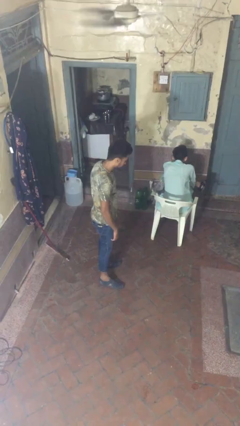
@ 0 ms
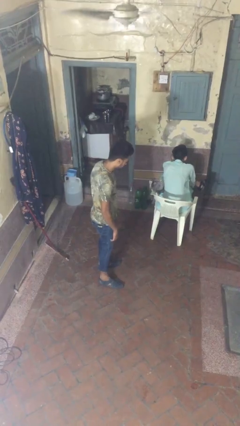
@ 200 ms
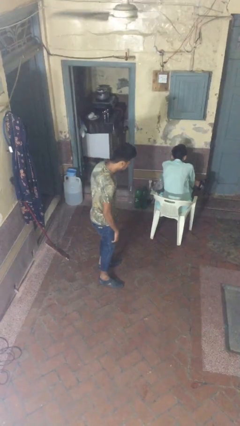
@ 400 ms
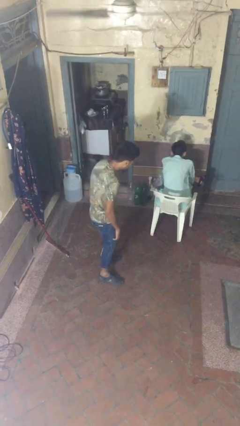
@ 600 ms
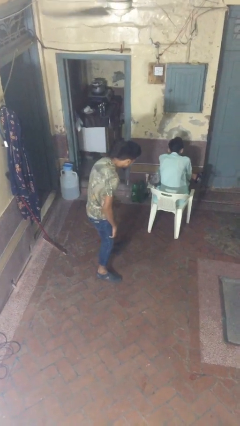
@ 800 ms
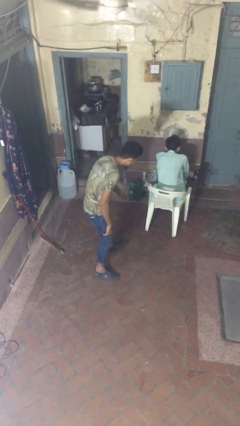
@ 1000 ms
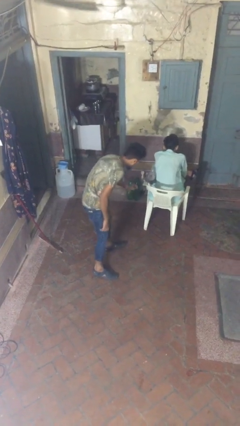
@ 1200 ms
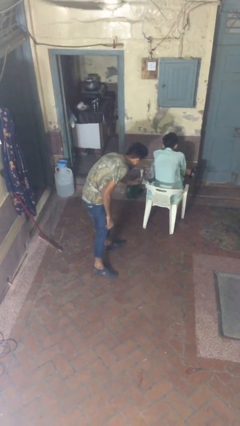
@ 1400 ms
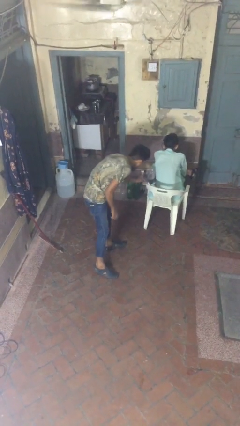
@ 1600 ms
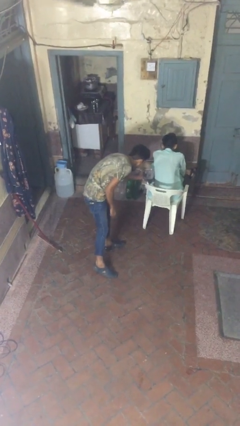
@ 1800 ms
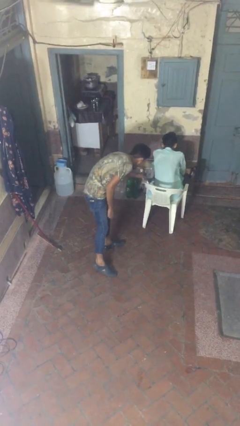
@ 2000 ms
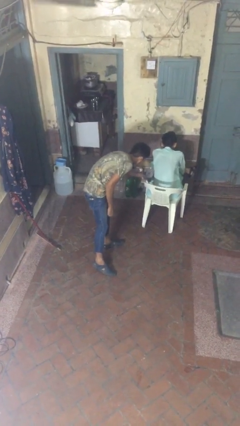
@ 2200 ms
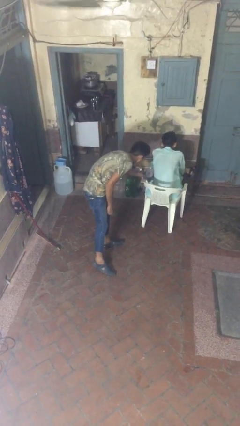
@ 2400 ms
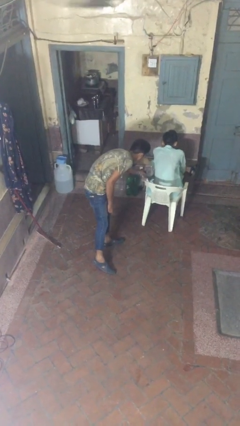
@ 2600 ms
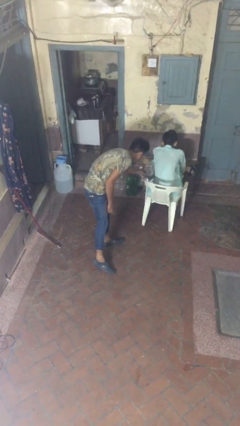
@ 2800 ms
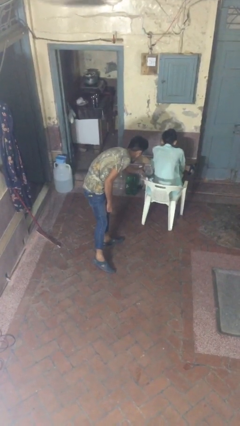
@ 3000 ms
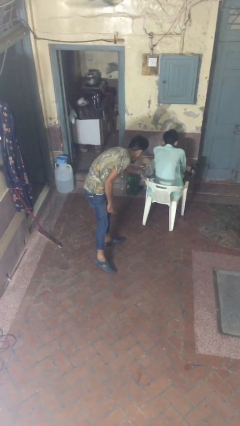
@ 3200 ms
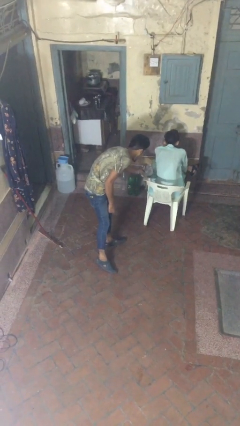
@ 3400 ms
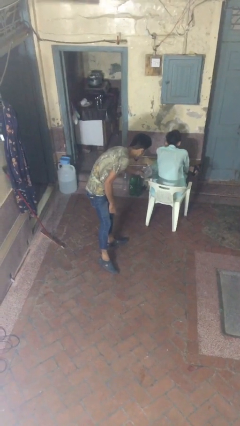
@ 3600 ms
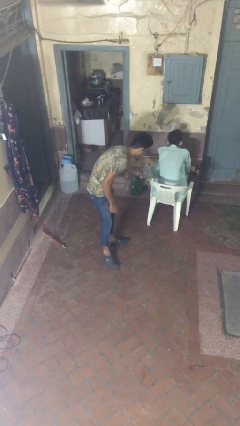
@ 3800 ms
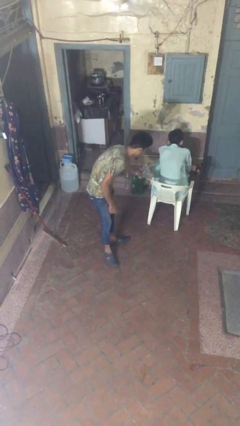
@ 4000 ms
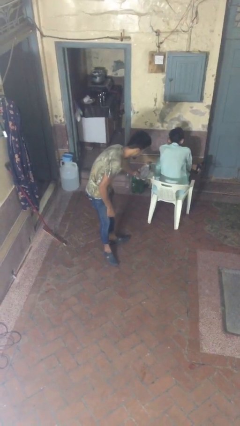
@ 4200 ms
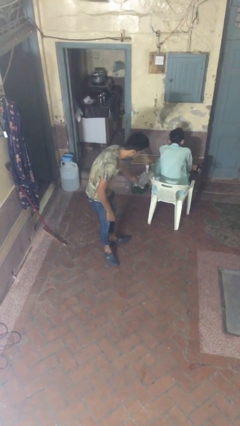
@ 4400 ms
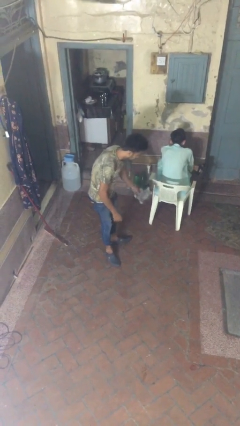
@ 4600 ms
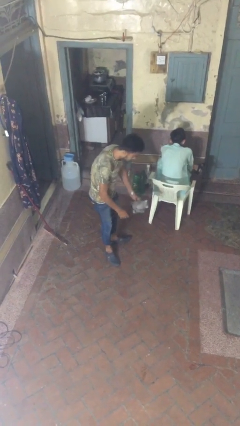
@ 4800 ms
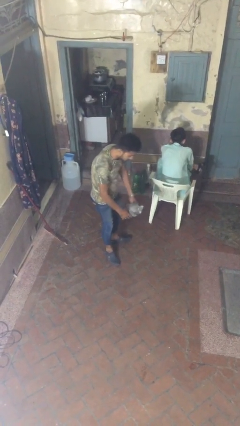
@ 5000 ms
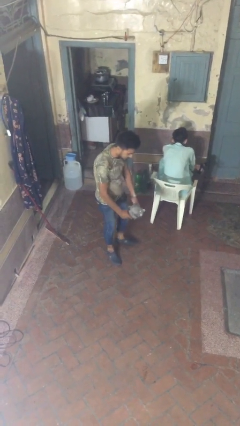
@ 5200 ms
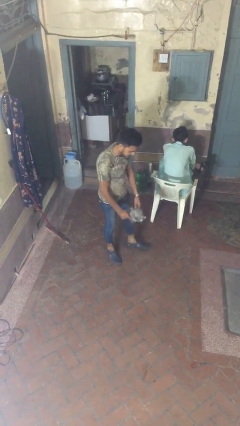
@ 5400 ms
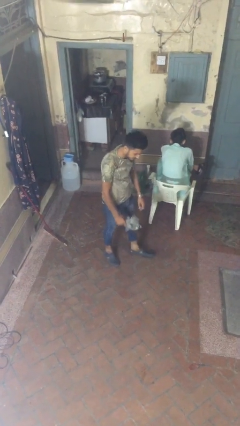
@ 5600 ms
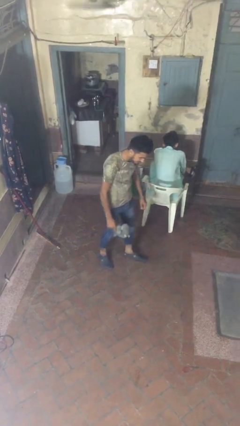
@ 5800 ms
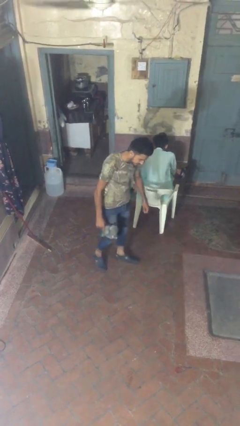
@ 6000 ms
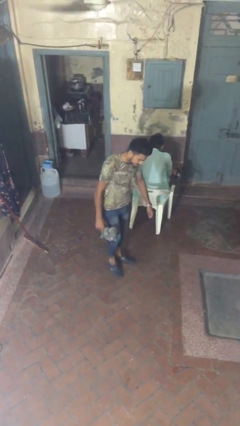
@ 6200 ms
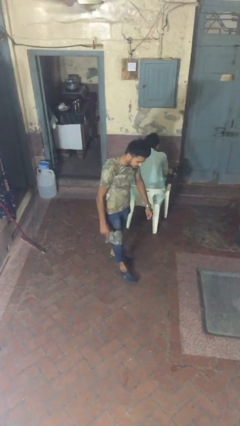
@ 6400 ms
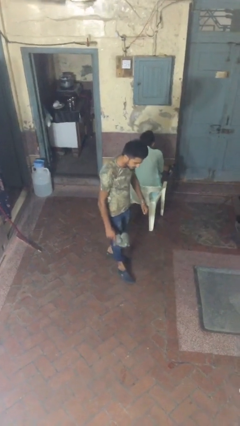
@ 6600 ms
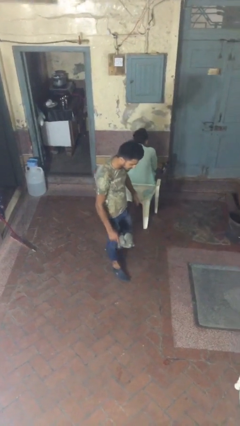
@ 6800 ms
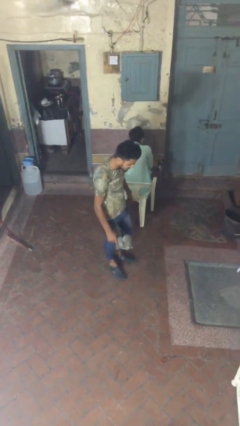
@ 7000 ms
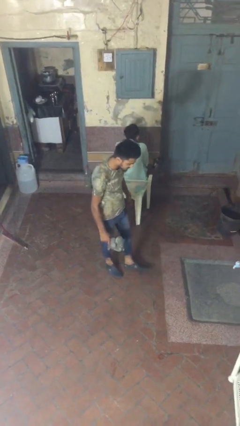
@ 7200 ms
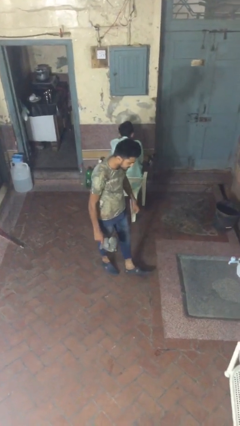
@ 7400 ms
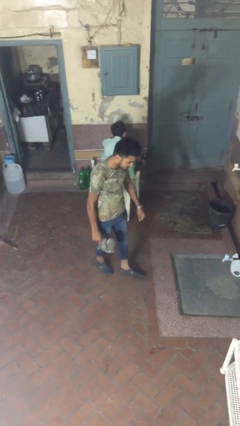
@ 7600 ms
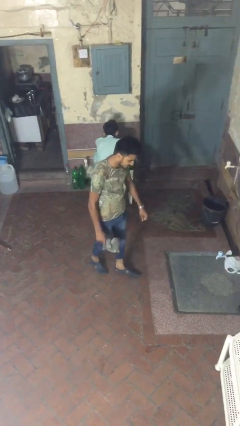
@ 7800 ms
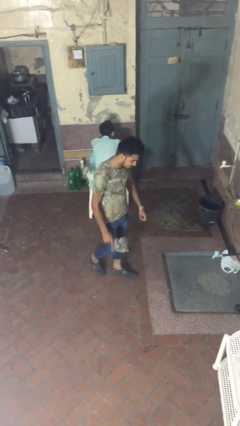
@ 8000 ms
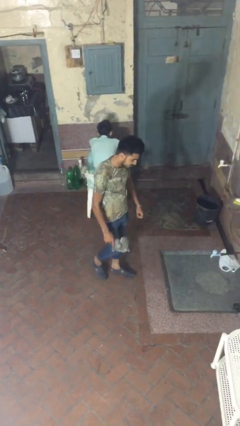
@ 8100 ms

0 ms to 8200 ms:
person steals object from person

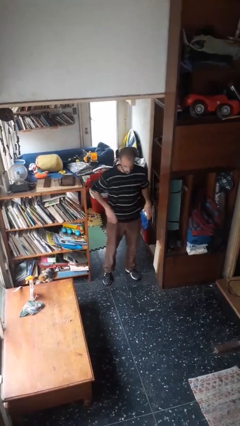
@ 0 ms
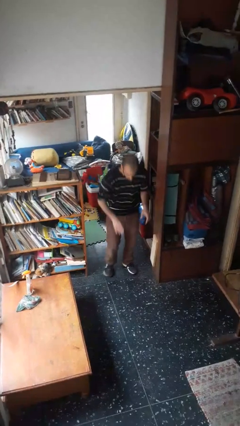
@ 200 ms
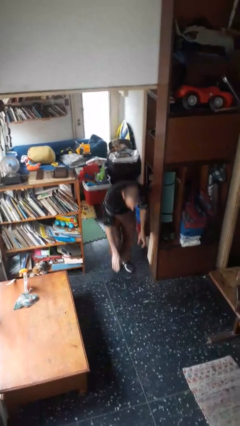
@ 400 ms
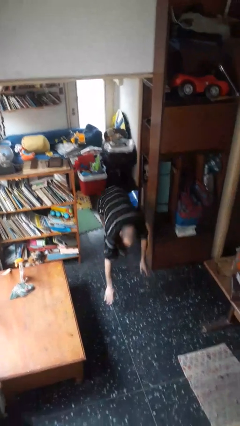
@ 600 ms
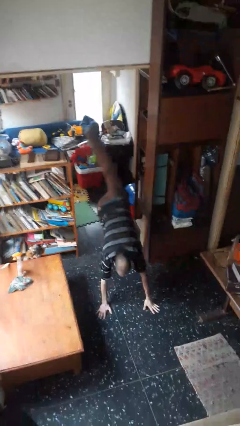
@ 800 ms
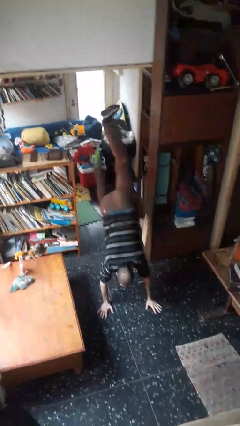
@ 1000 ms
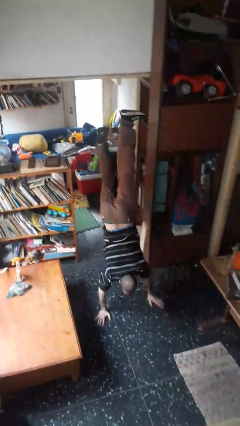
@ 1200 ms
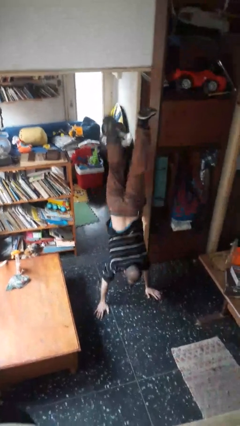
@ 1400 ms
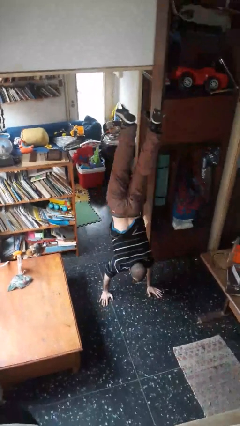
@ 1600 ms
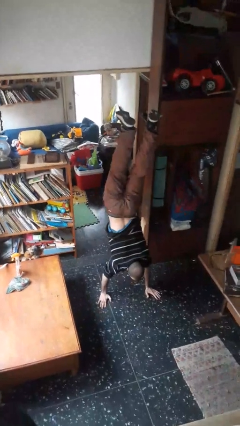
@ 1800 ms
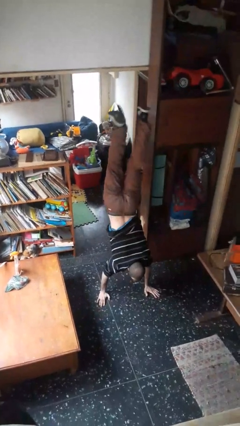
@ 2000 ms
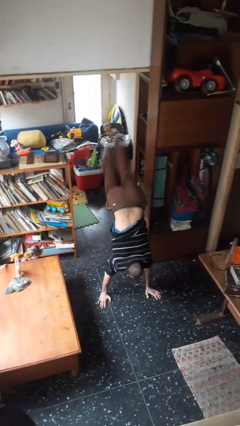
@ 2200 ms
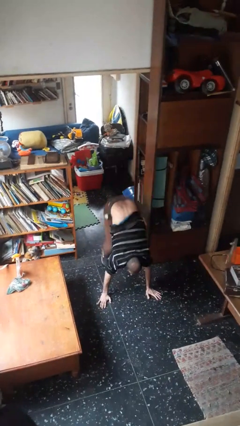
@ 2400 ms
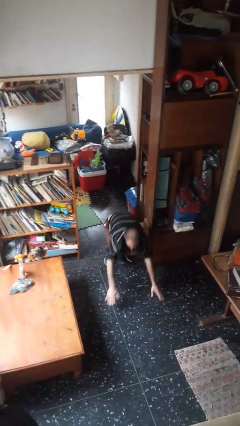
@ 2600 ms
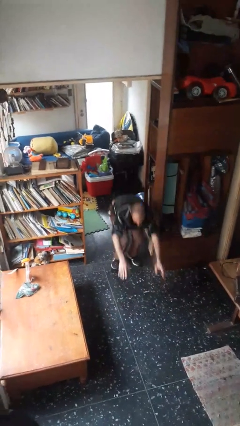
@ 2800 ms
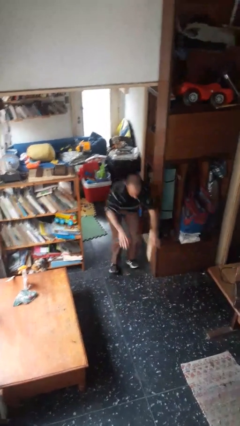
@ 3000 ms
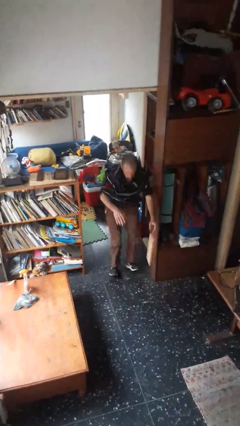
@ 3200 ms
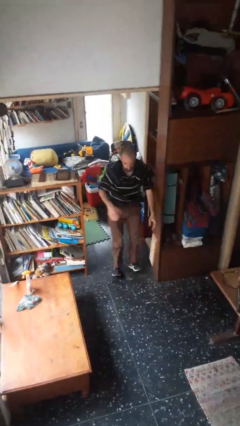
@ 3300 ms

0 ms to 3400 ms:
person handstand

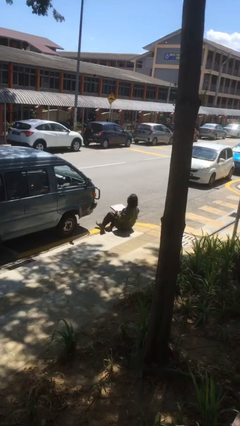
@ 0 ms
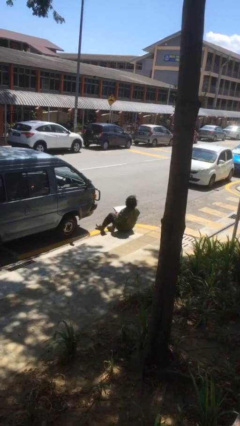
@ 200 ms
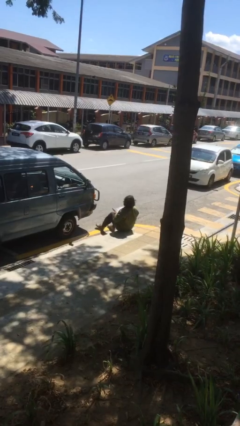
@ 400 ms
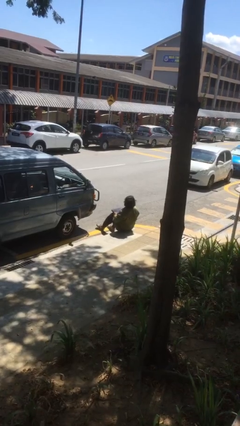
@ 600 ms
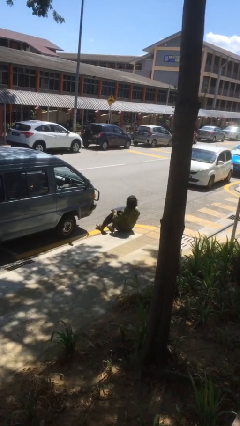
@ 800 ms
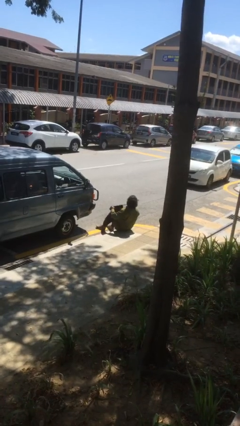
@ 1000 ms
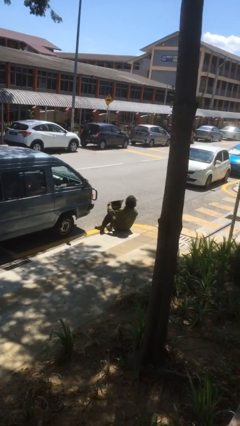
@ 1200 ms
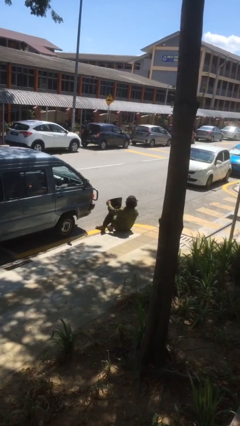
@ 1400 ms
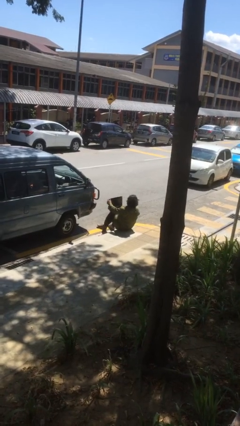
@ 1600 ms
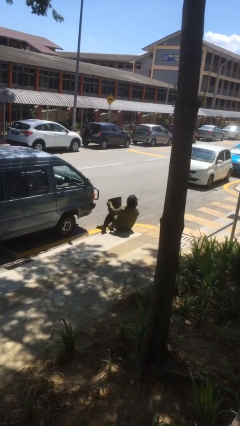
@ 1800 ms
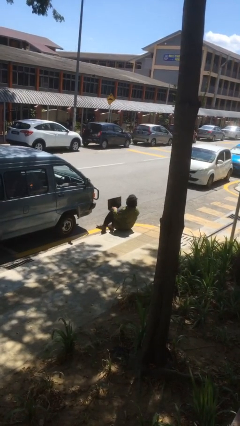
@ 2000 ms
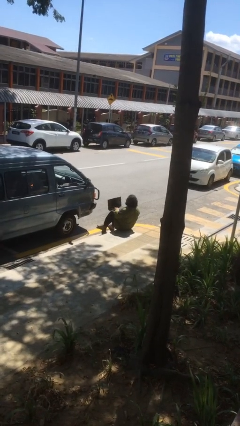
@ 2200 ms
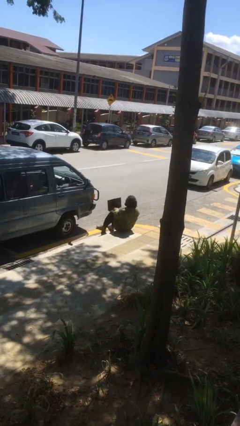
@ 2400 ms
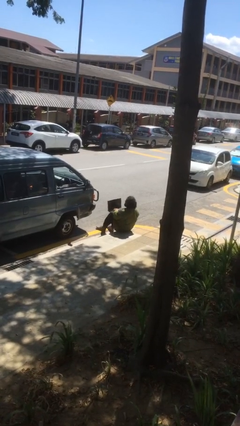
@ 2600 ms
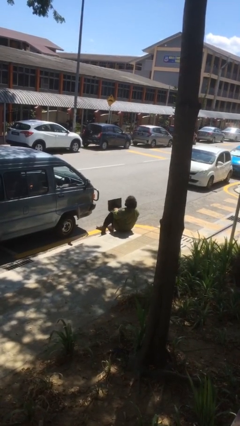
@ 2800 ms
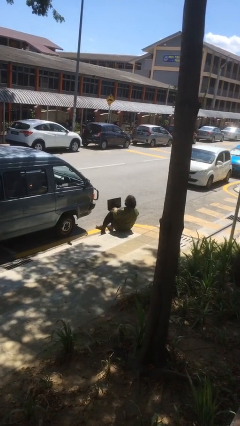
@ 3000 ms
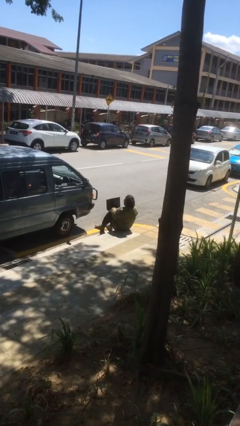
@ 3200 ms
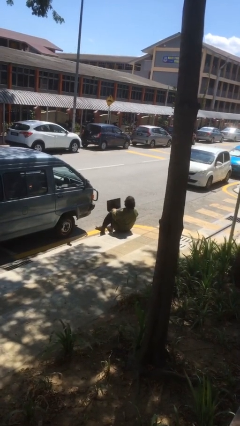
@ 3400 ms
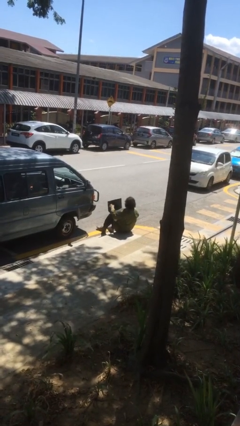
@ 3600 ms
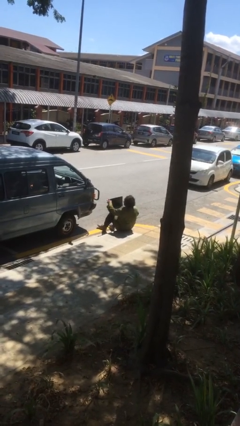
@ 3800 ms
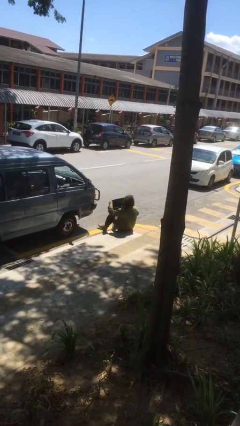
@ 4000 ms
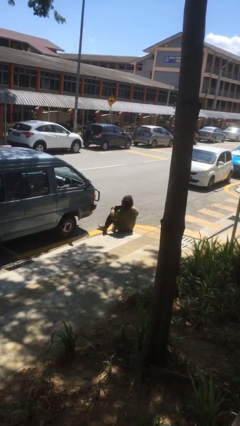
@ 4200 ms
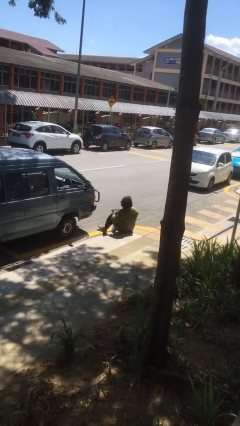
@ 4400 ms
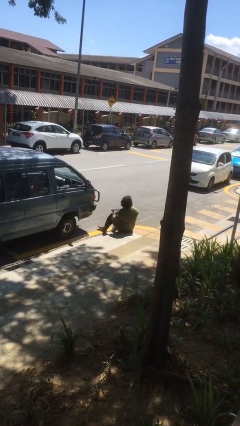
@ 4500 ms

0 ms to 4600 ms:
person interacts with laptop

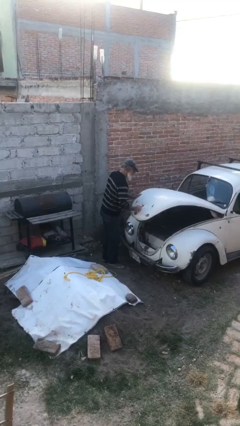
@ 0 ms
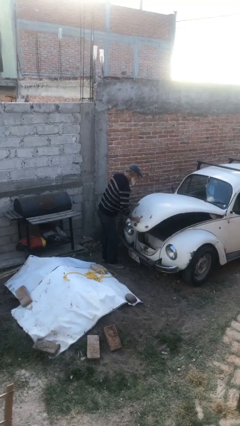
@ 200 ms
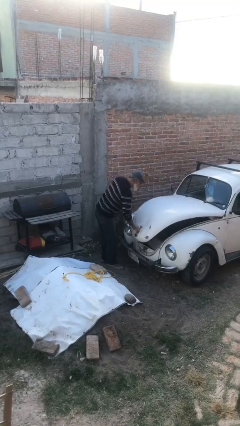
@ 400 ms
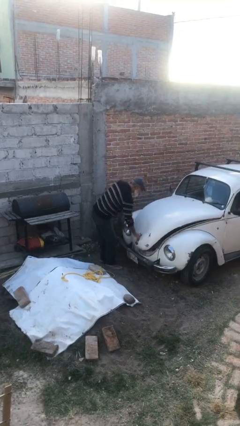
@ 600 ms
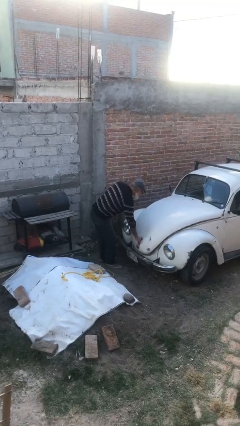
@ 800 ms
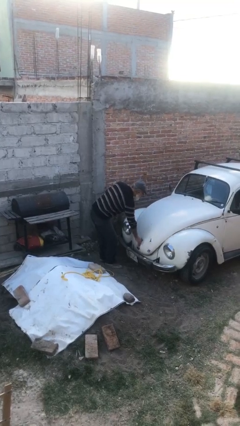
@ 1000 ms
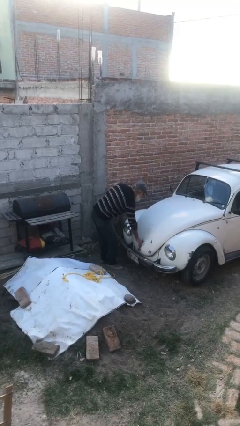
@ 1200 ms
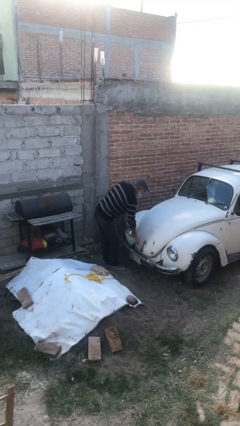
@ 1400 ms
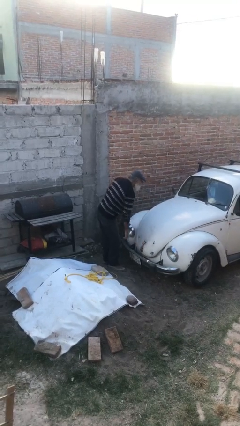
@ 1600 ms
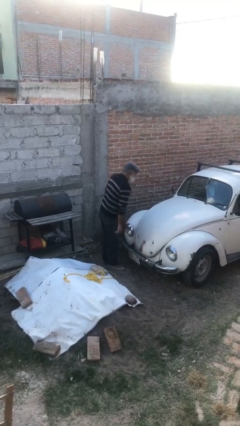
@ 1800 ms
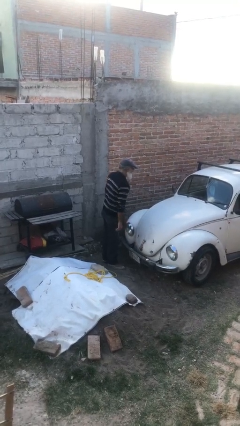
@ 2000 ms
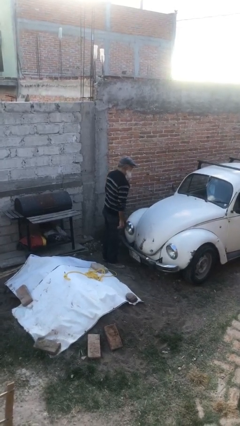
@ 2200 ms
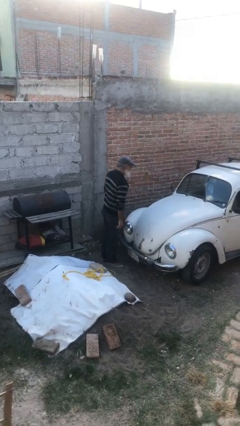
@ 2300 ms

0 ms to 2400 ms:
person closes car trunk
